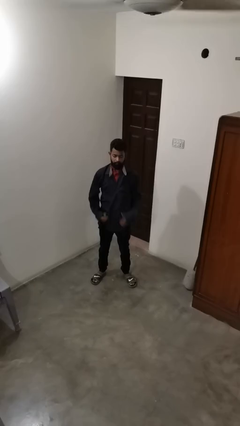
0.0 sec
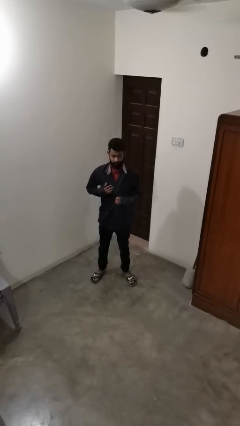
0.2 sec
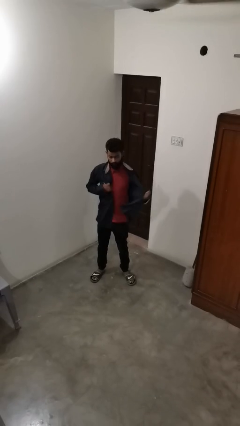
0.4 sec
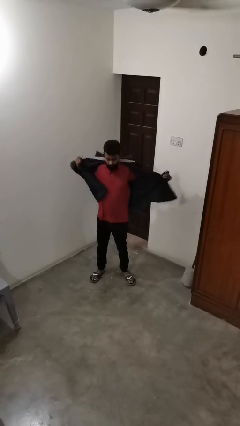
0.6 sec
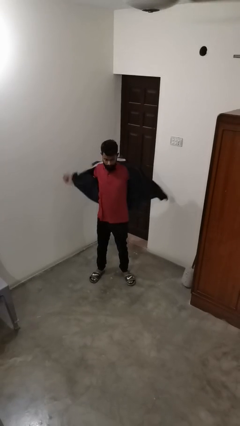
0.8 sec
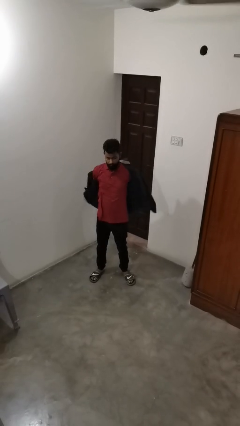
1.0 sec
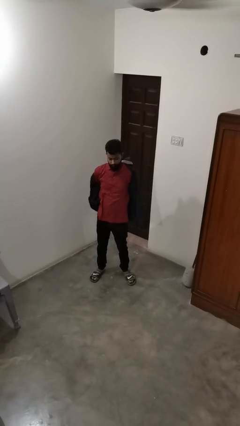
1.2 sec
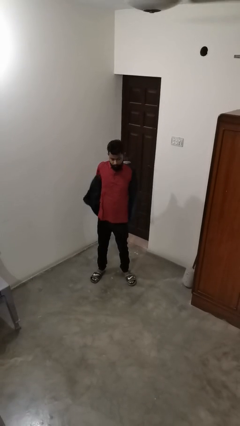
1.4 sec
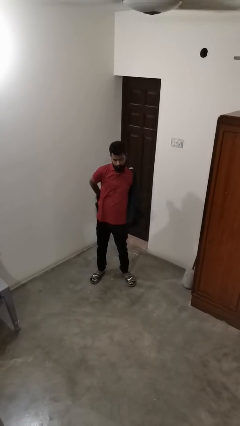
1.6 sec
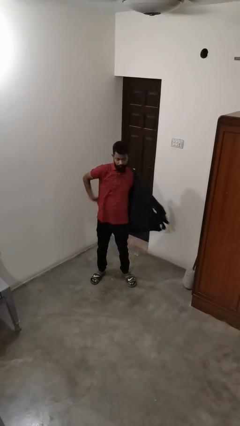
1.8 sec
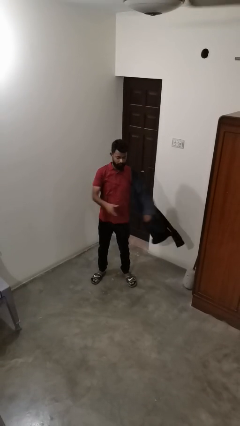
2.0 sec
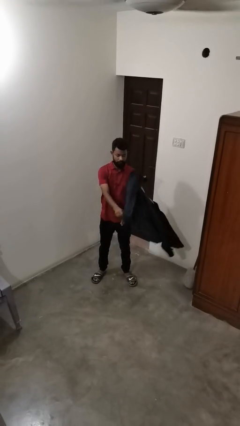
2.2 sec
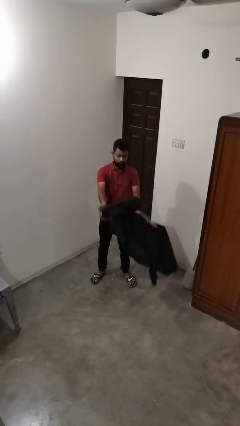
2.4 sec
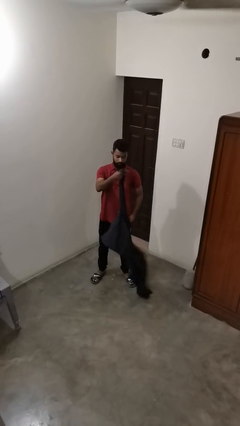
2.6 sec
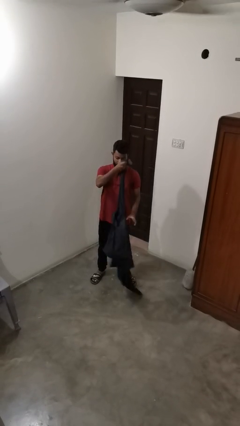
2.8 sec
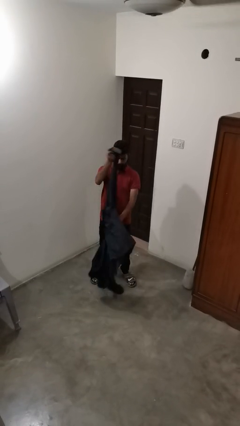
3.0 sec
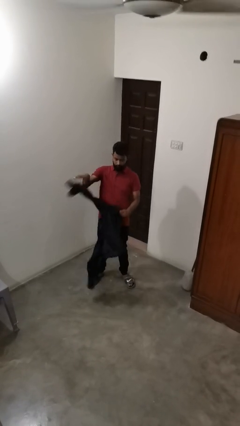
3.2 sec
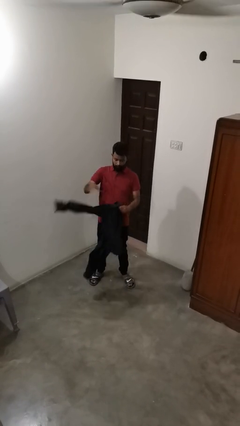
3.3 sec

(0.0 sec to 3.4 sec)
person takes off shirt

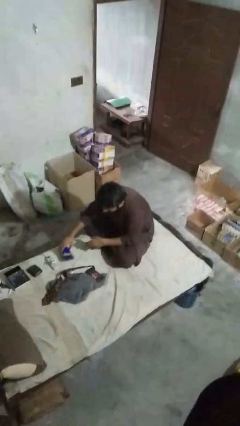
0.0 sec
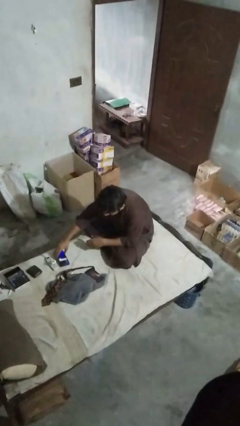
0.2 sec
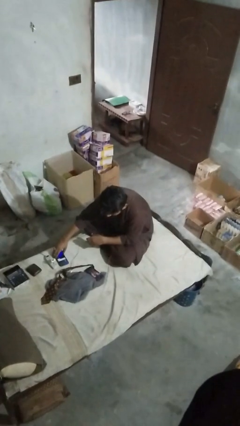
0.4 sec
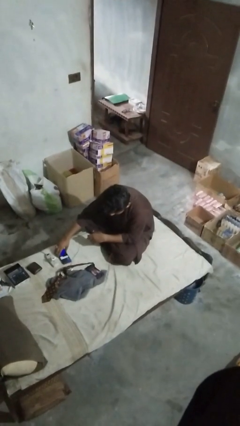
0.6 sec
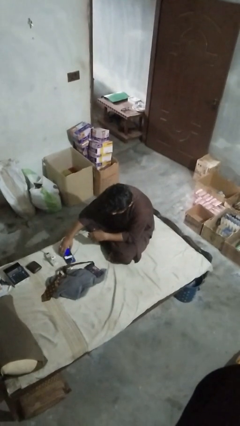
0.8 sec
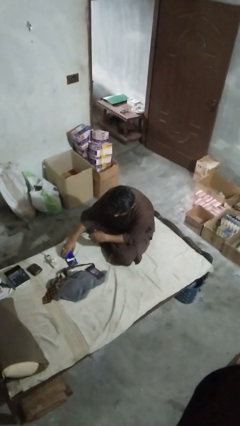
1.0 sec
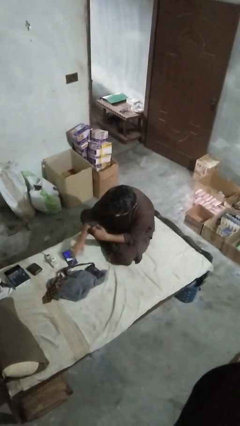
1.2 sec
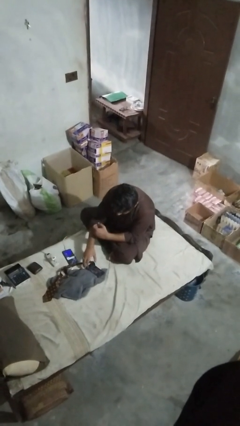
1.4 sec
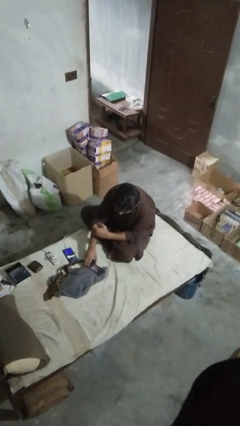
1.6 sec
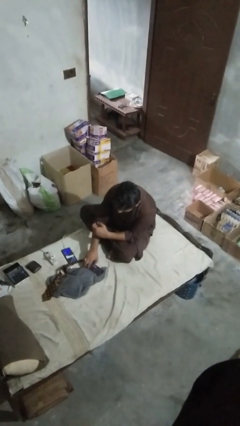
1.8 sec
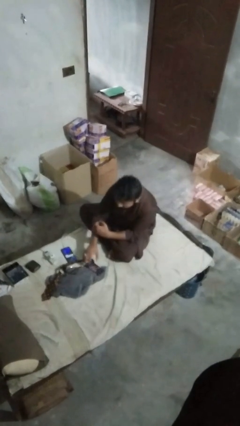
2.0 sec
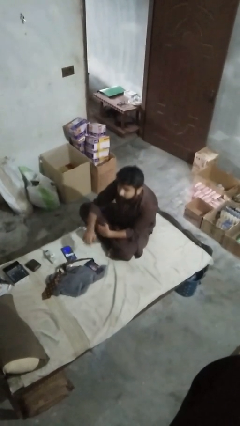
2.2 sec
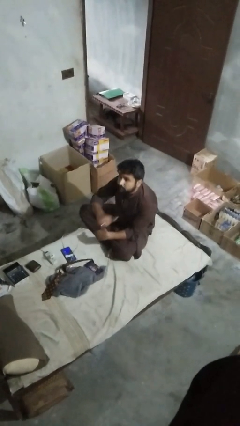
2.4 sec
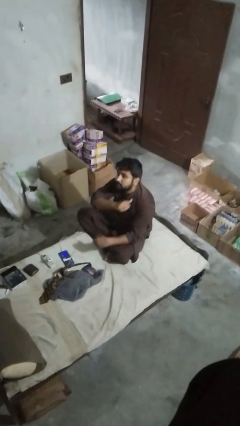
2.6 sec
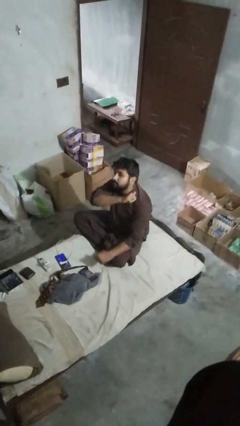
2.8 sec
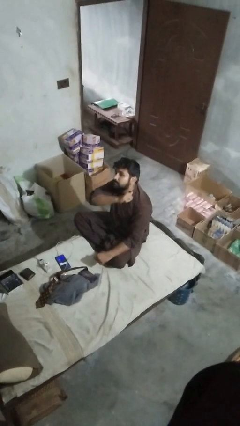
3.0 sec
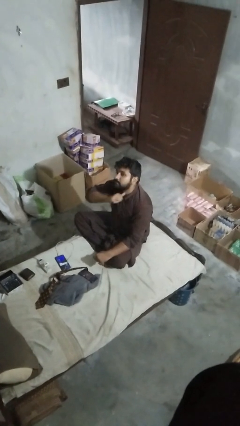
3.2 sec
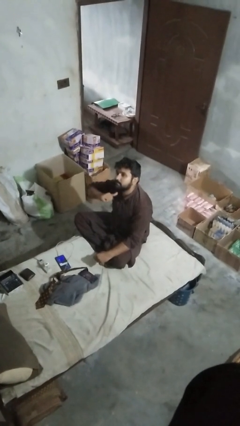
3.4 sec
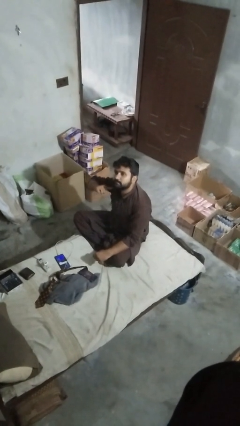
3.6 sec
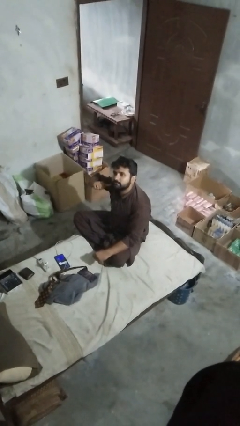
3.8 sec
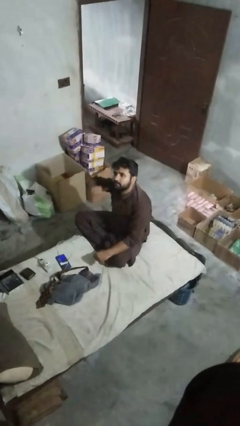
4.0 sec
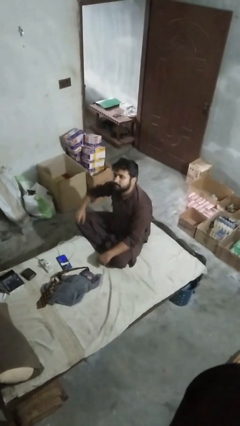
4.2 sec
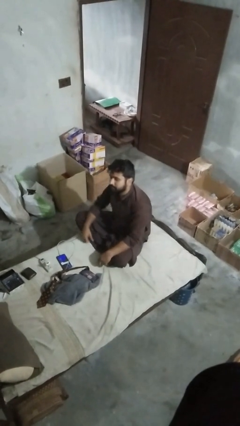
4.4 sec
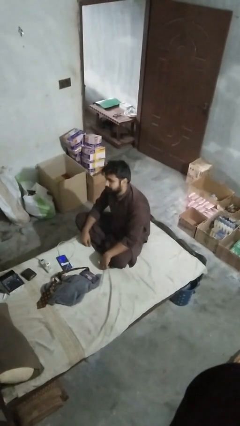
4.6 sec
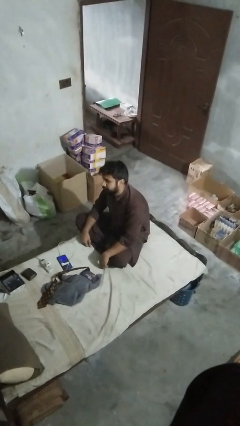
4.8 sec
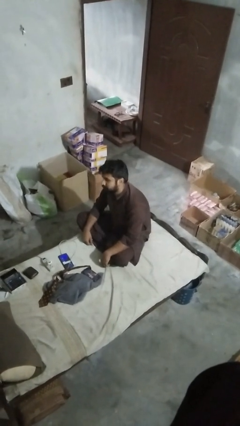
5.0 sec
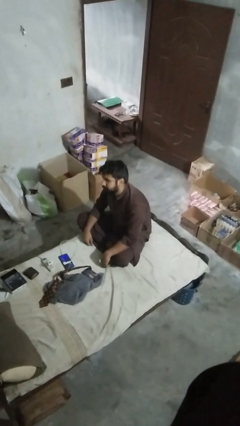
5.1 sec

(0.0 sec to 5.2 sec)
person gestures cut

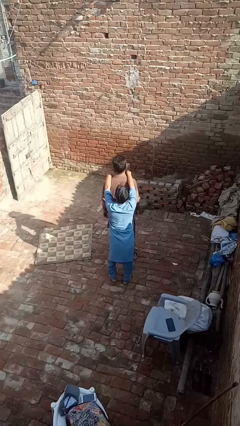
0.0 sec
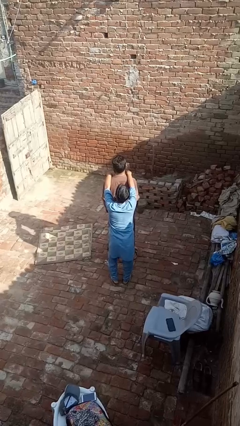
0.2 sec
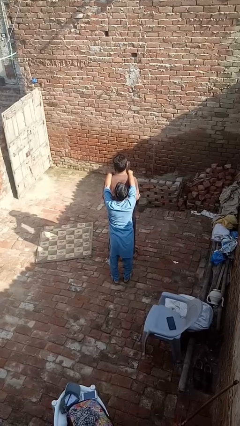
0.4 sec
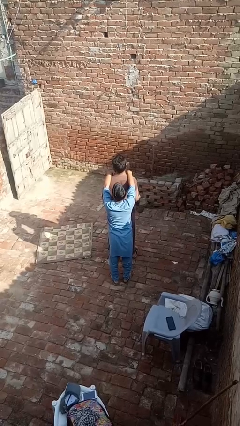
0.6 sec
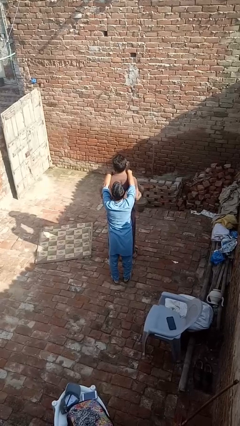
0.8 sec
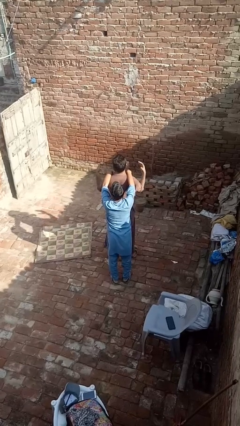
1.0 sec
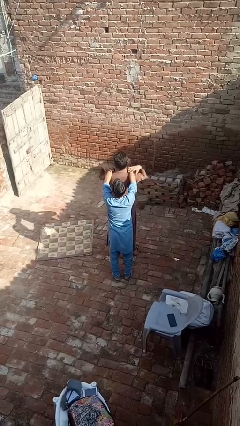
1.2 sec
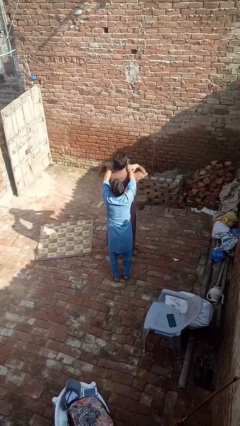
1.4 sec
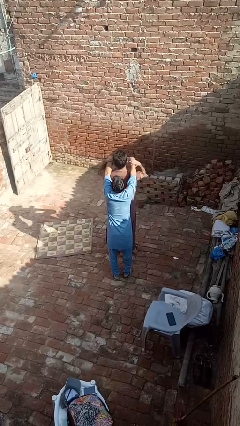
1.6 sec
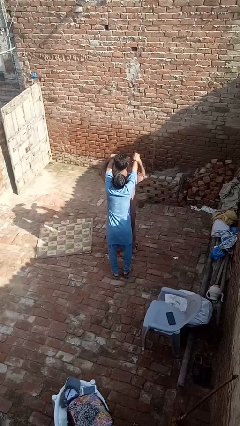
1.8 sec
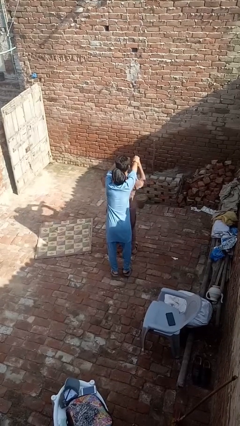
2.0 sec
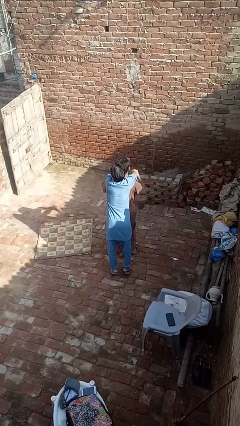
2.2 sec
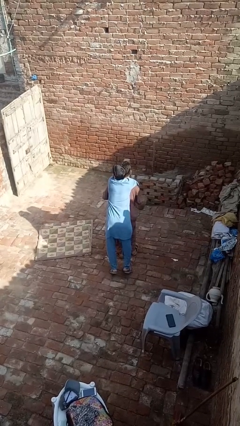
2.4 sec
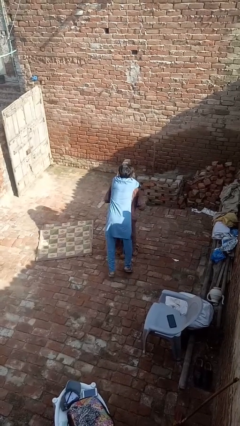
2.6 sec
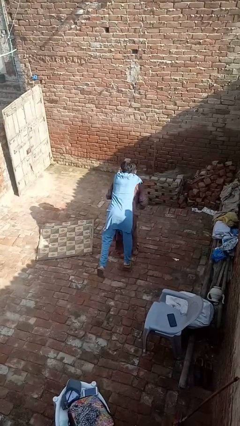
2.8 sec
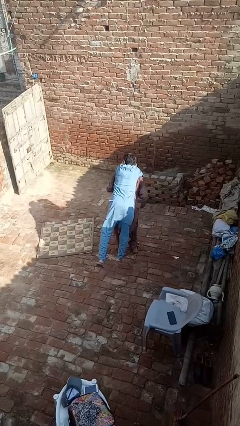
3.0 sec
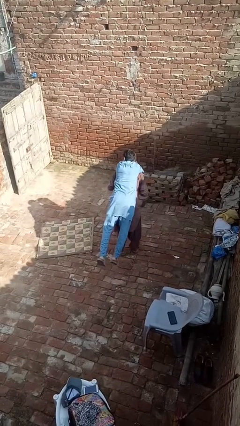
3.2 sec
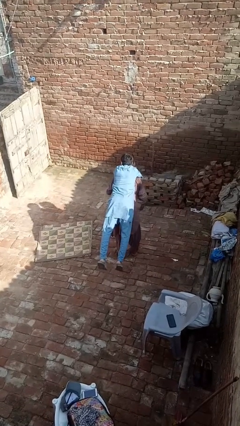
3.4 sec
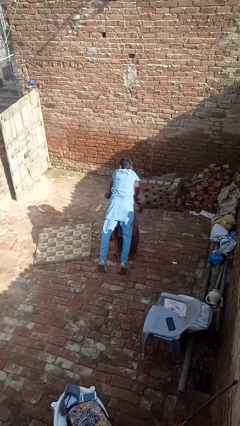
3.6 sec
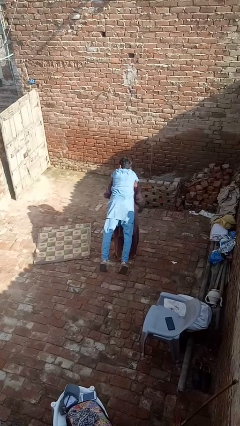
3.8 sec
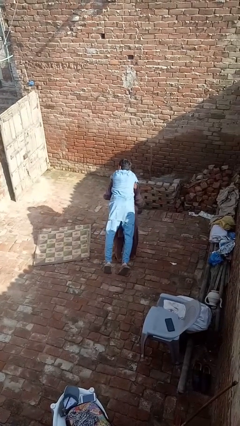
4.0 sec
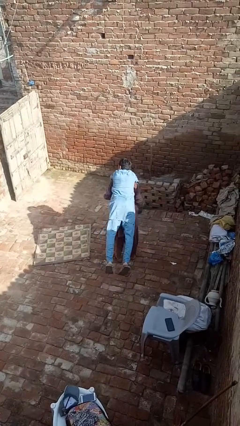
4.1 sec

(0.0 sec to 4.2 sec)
person carries person over shoulder

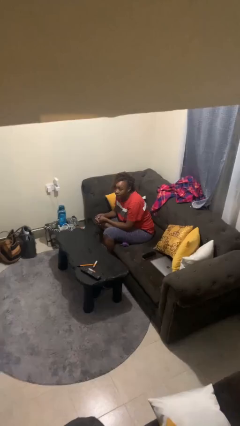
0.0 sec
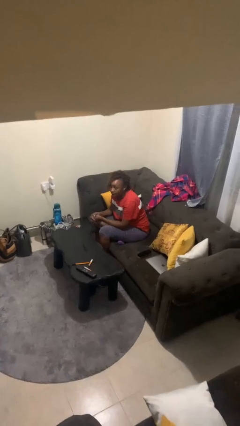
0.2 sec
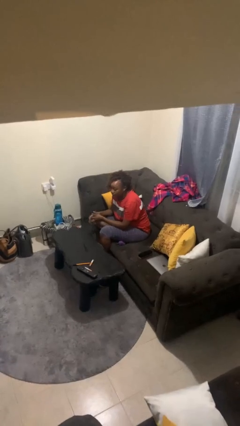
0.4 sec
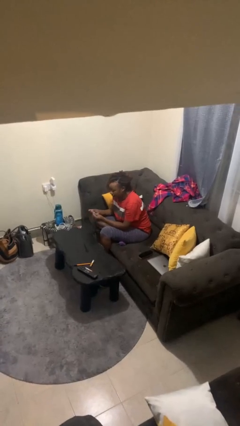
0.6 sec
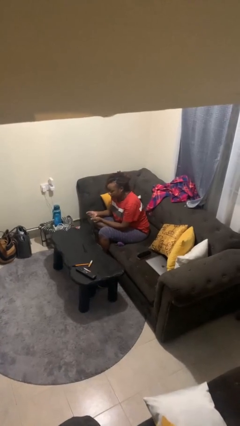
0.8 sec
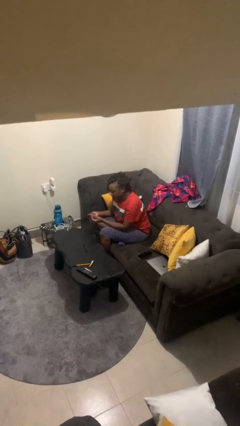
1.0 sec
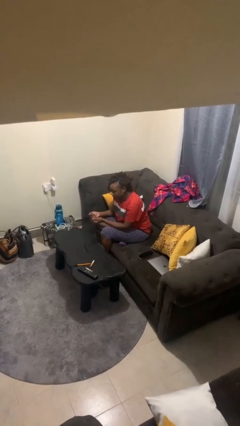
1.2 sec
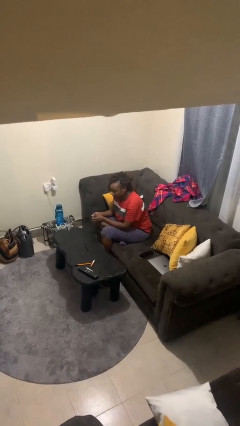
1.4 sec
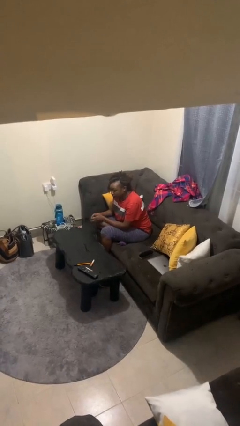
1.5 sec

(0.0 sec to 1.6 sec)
person snaps fingers

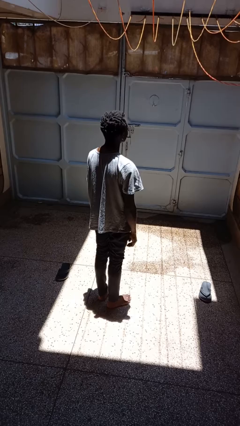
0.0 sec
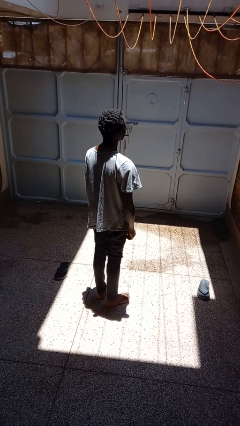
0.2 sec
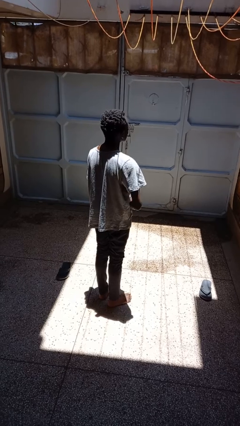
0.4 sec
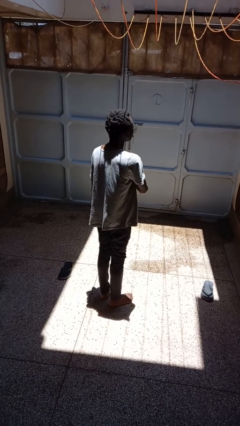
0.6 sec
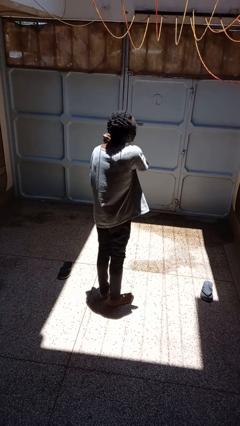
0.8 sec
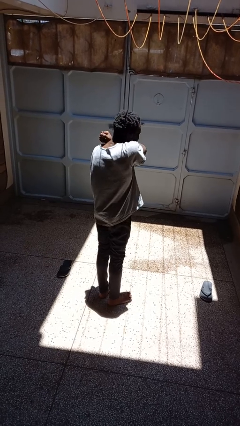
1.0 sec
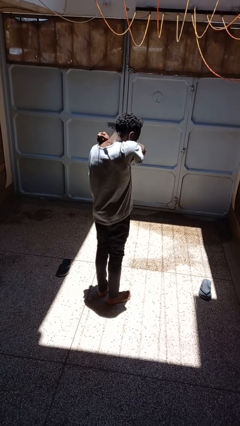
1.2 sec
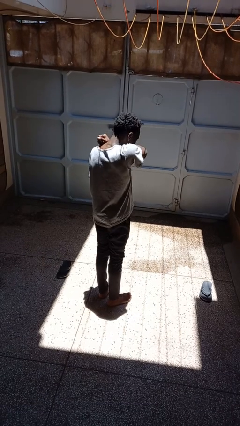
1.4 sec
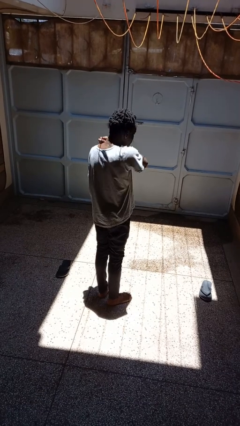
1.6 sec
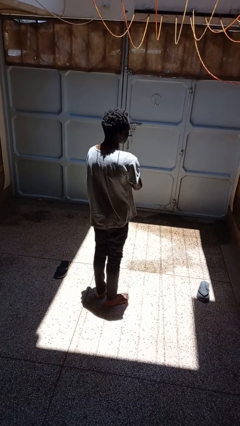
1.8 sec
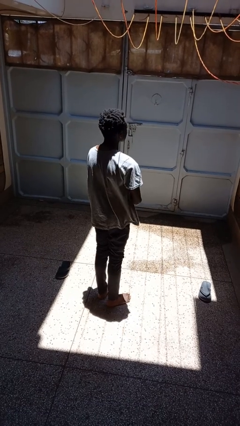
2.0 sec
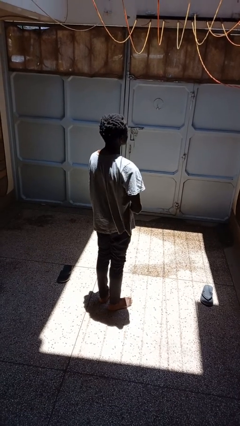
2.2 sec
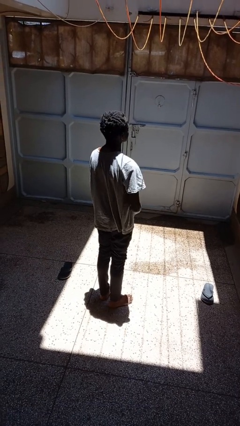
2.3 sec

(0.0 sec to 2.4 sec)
person sneezes into arm

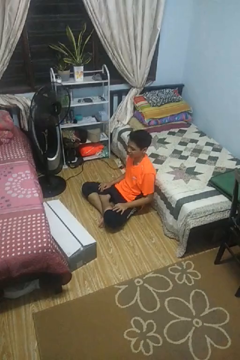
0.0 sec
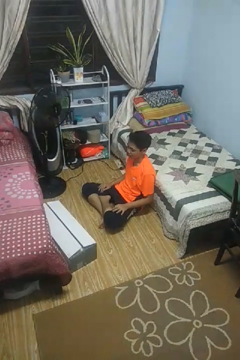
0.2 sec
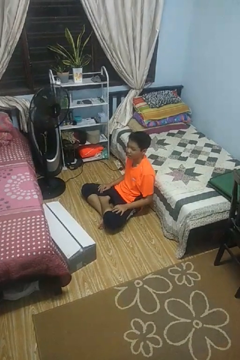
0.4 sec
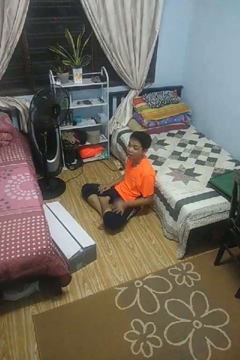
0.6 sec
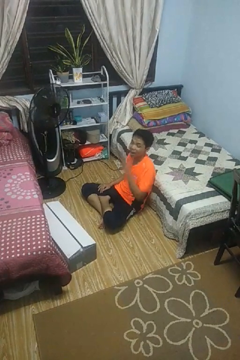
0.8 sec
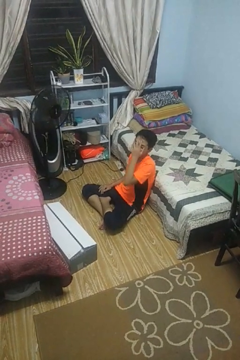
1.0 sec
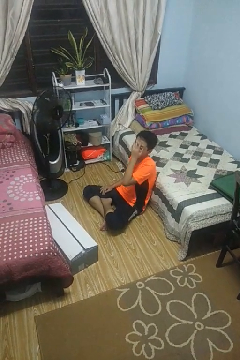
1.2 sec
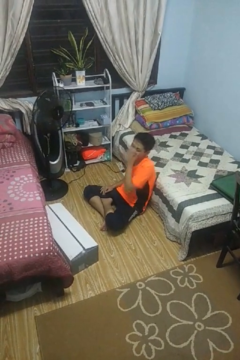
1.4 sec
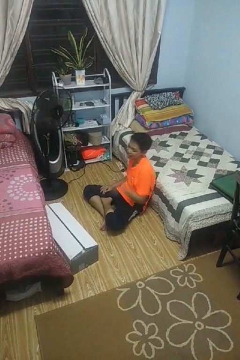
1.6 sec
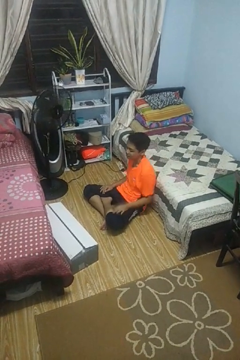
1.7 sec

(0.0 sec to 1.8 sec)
person covers face with hands
